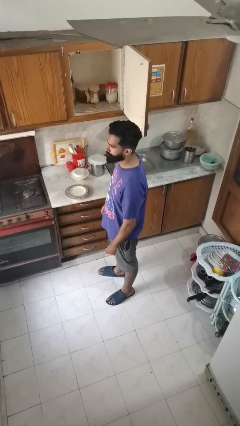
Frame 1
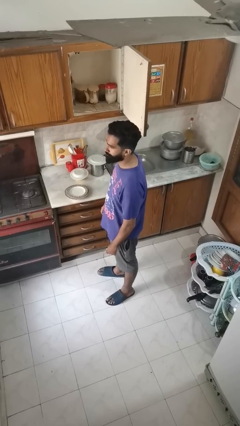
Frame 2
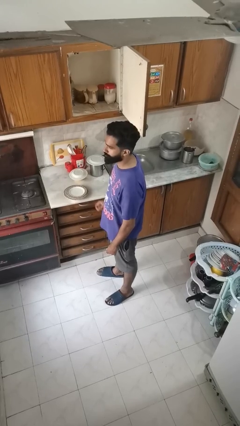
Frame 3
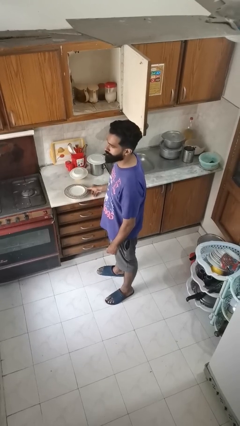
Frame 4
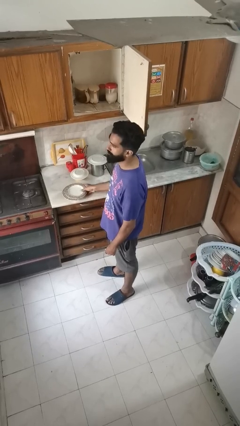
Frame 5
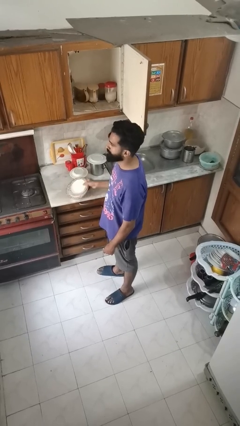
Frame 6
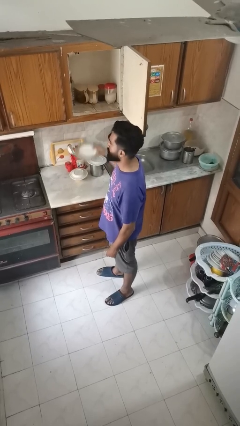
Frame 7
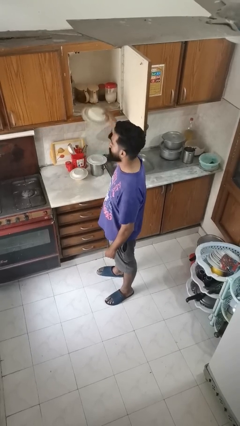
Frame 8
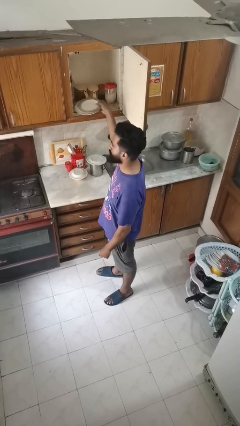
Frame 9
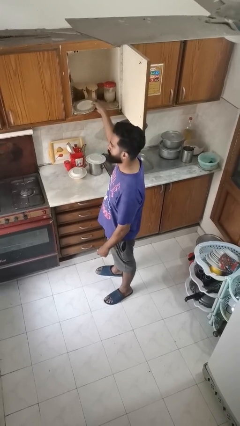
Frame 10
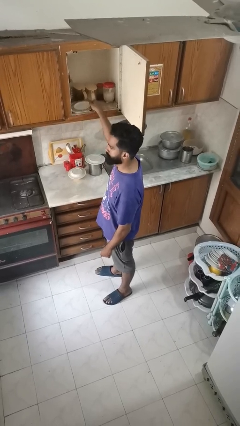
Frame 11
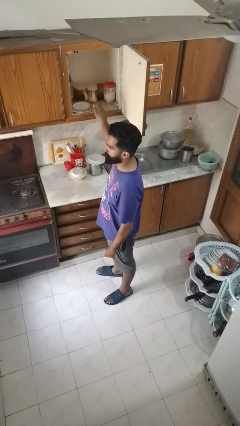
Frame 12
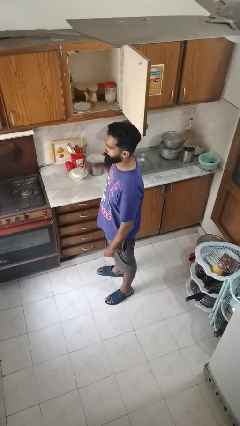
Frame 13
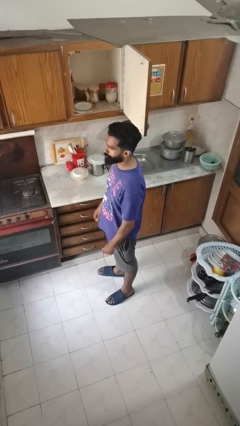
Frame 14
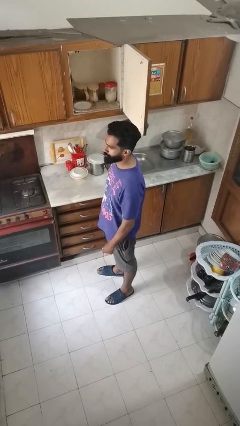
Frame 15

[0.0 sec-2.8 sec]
person puts object in cabinet

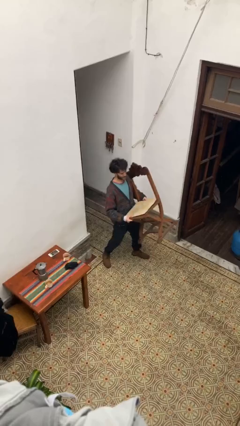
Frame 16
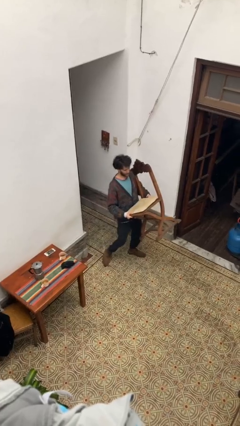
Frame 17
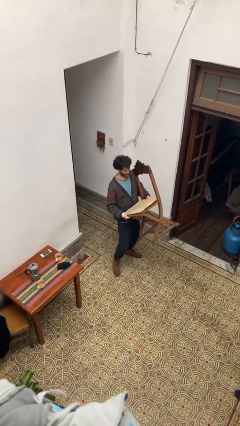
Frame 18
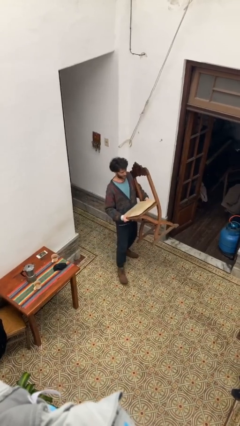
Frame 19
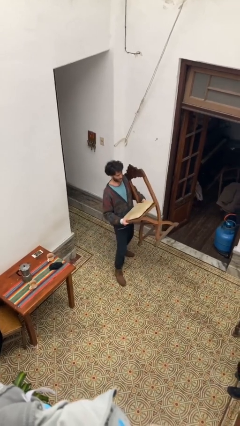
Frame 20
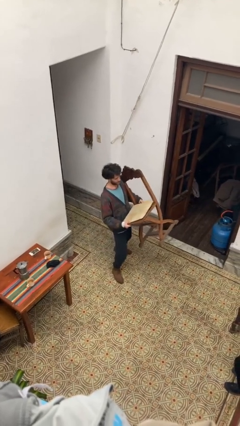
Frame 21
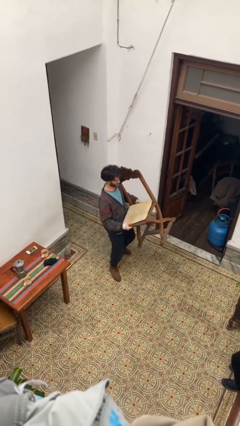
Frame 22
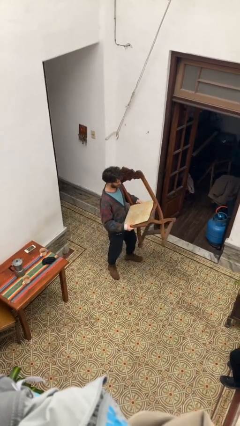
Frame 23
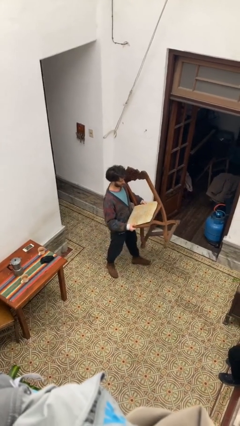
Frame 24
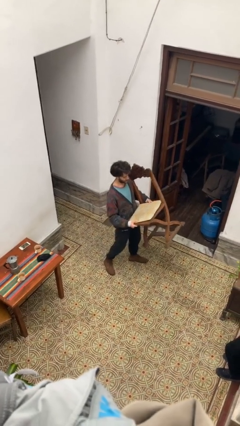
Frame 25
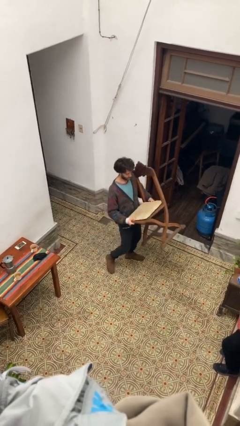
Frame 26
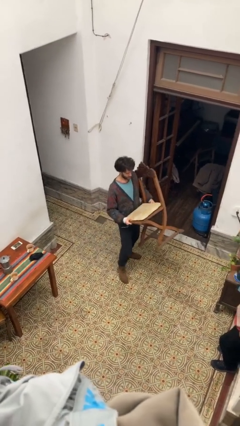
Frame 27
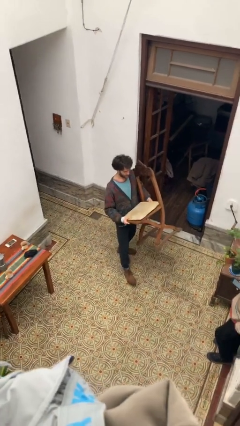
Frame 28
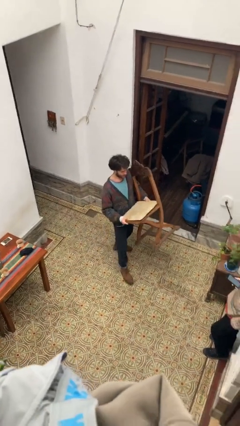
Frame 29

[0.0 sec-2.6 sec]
person carries heavy object

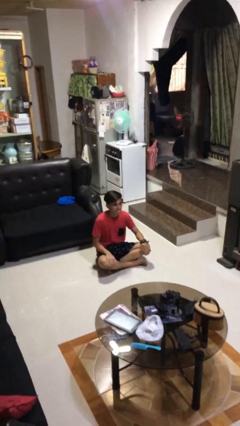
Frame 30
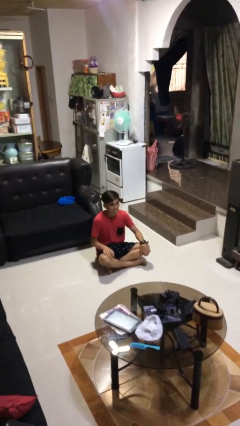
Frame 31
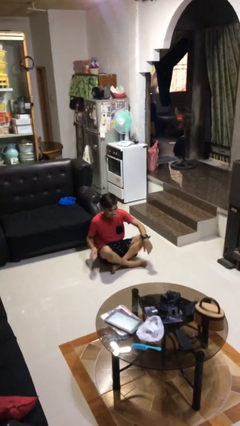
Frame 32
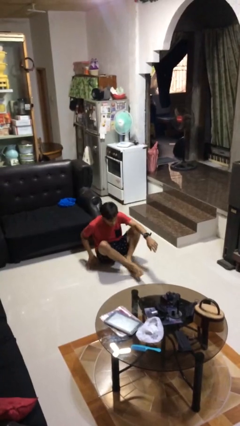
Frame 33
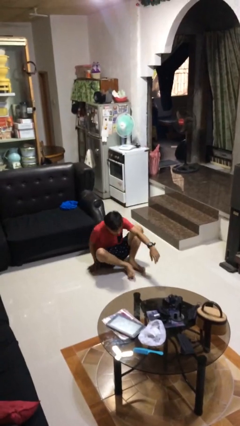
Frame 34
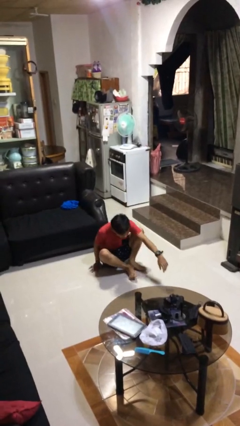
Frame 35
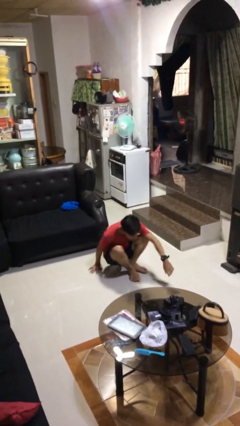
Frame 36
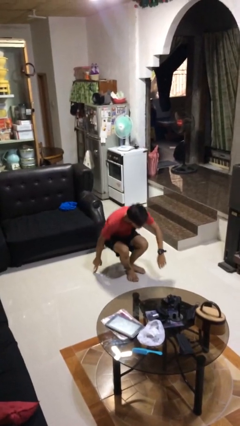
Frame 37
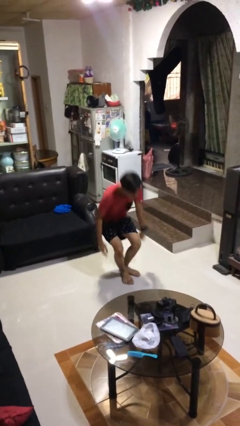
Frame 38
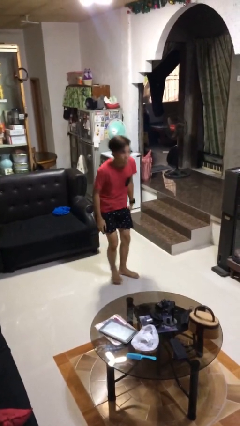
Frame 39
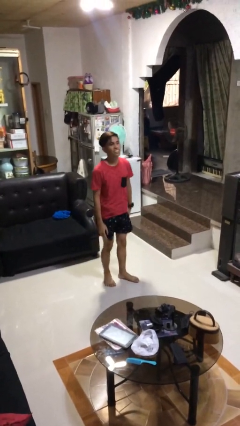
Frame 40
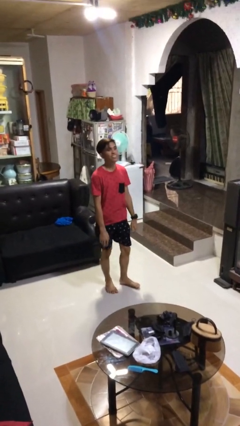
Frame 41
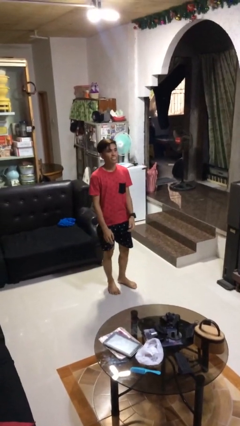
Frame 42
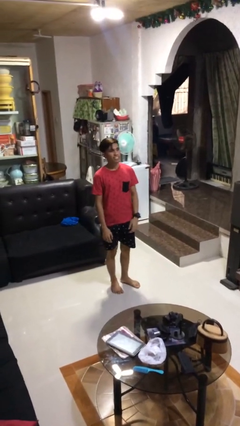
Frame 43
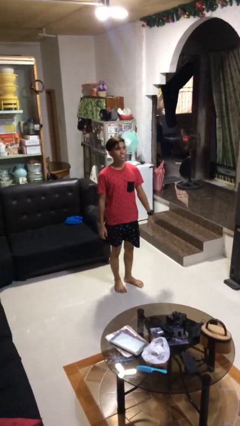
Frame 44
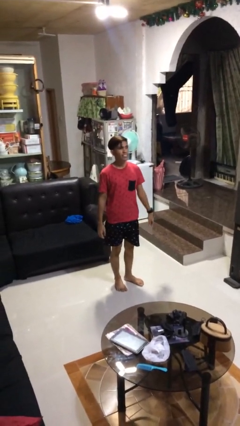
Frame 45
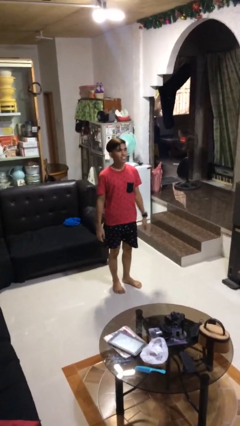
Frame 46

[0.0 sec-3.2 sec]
person stands up from floor

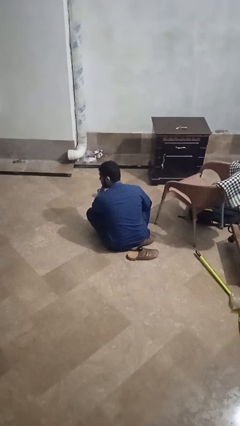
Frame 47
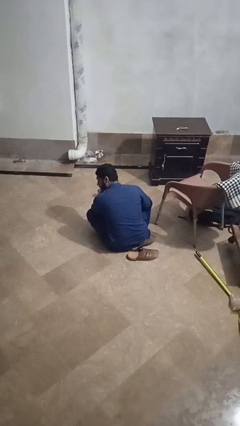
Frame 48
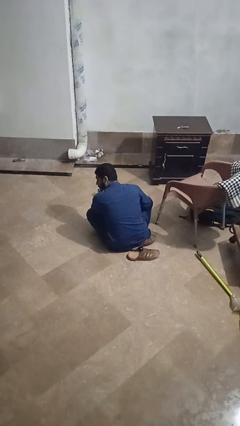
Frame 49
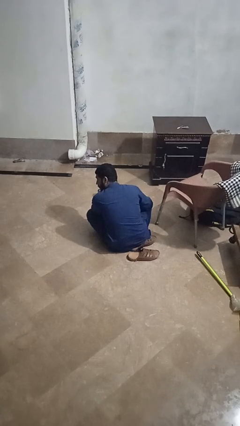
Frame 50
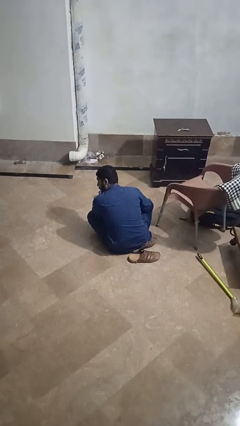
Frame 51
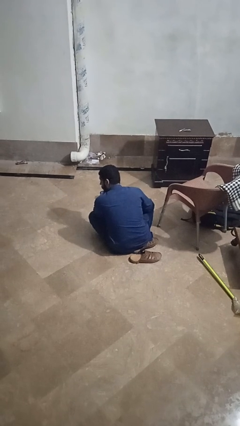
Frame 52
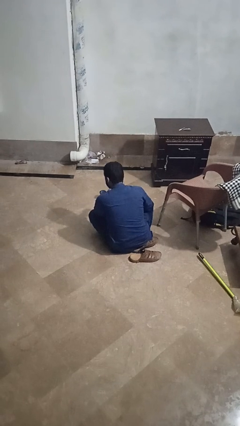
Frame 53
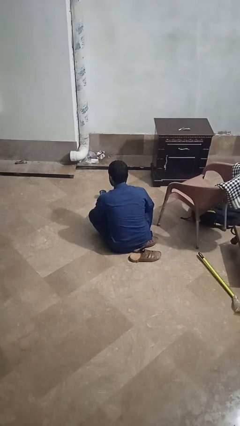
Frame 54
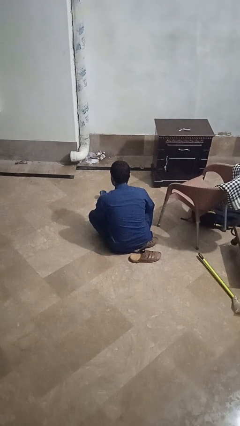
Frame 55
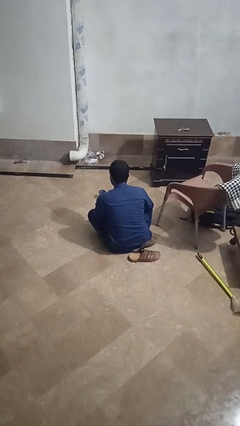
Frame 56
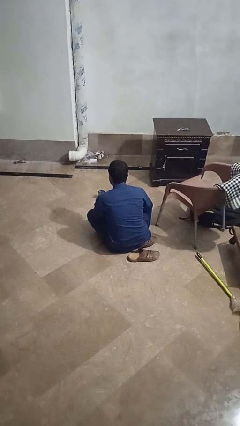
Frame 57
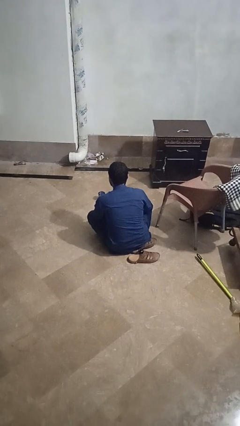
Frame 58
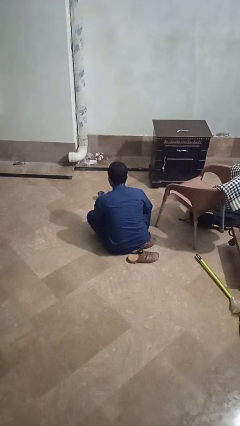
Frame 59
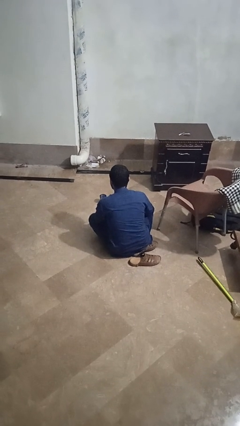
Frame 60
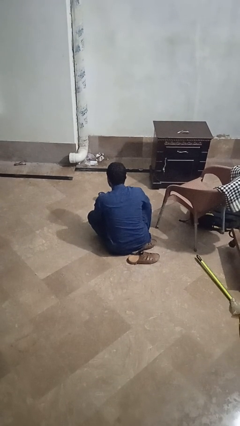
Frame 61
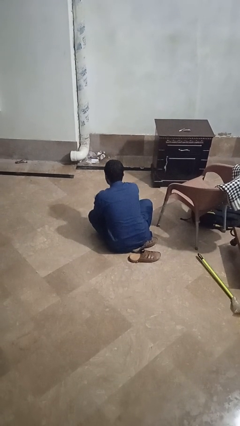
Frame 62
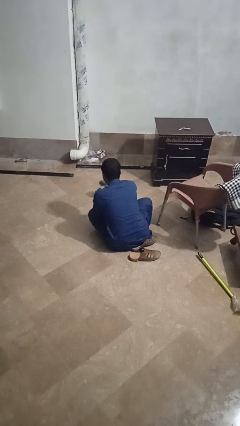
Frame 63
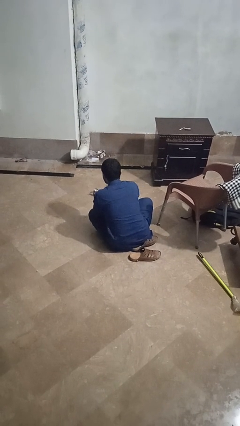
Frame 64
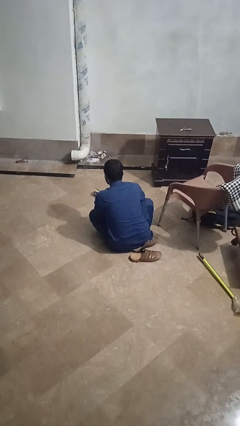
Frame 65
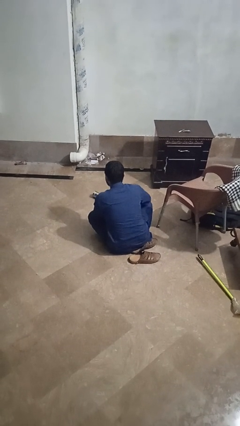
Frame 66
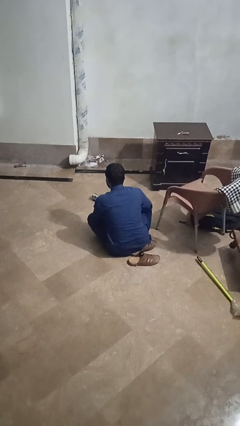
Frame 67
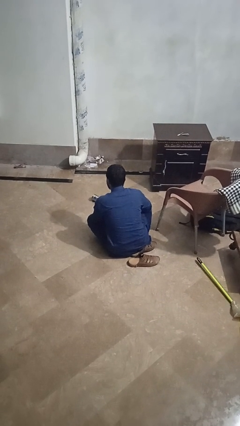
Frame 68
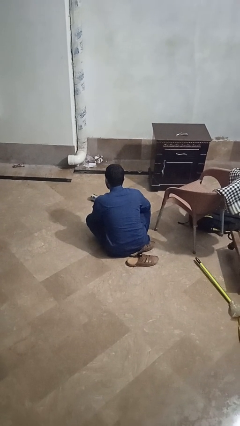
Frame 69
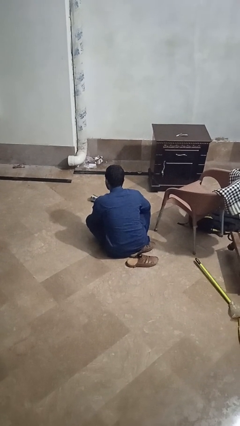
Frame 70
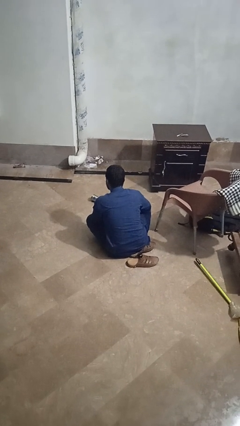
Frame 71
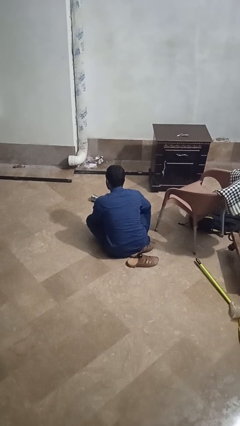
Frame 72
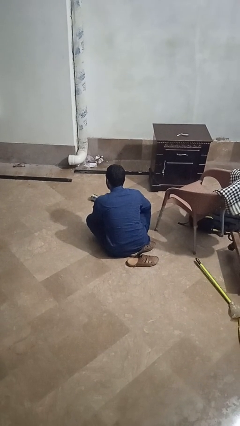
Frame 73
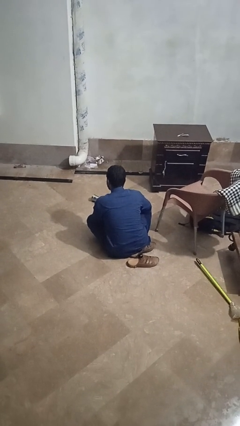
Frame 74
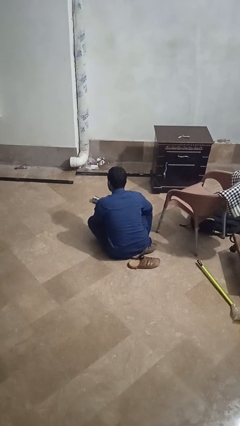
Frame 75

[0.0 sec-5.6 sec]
person spills on floor

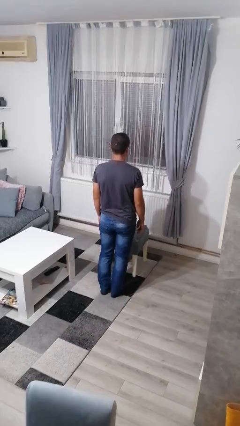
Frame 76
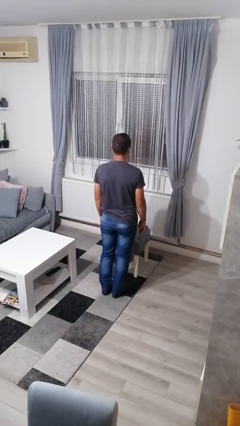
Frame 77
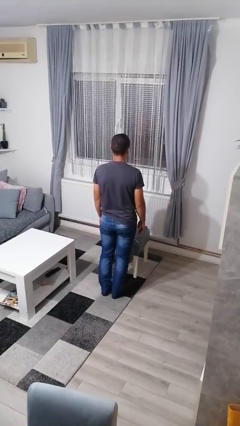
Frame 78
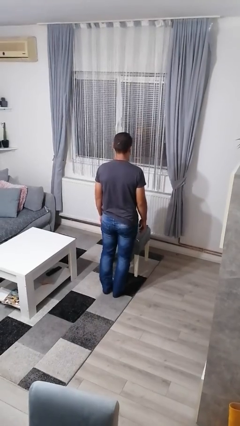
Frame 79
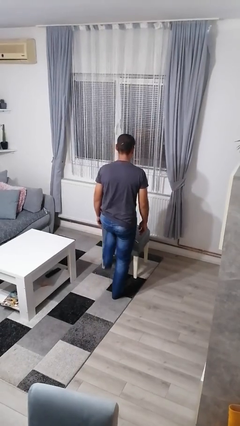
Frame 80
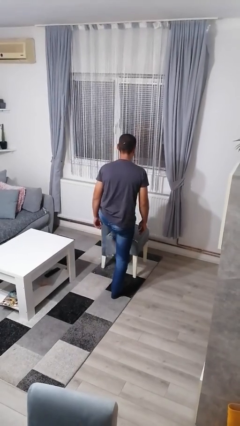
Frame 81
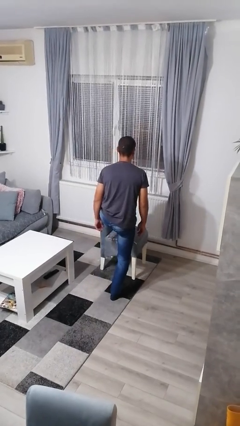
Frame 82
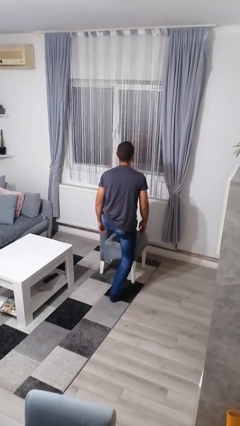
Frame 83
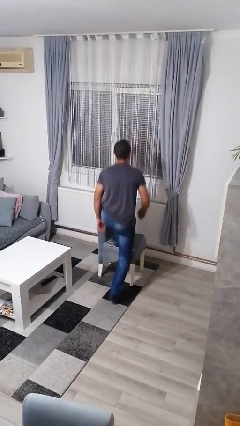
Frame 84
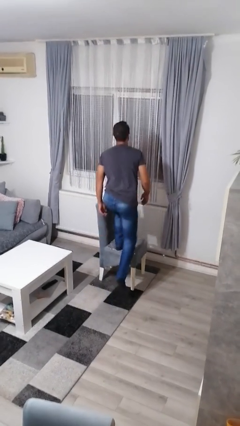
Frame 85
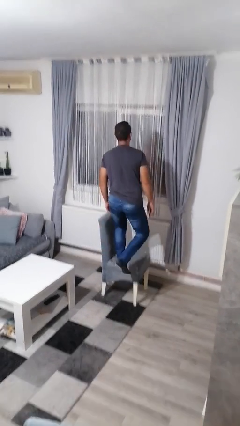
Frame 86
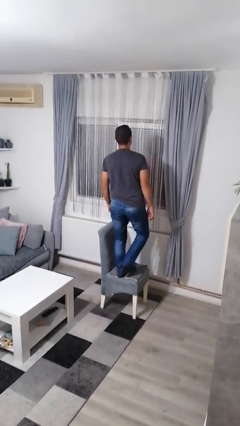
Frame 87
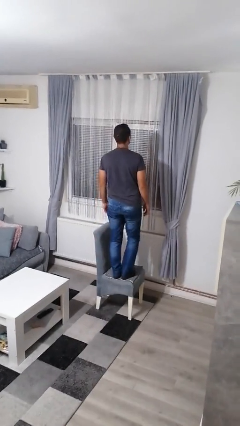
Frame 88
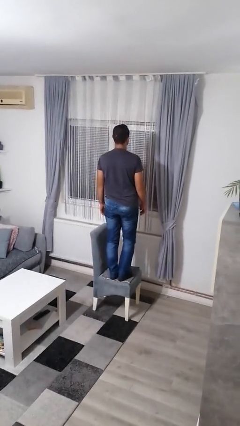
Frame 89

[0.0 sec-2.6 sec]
person climbs on chair

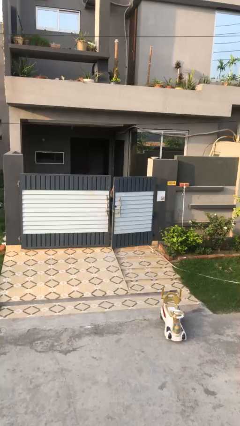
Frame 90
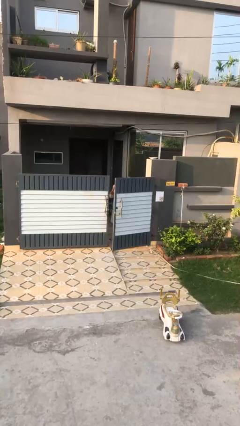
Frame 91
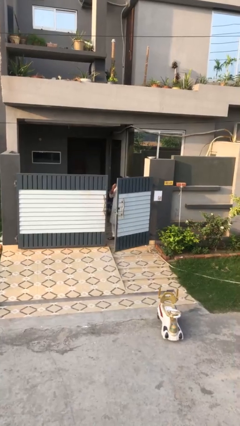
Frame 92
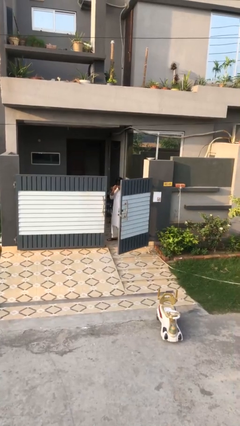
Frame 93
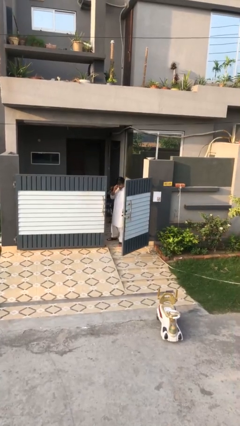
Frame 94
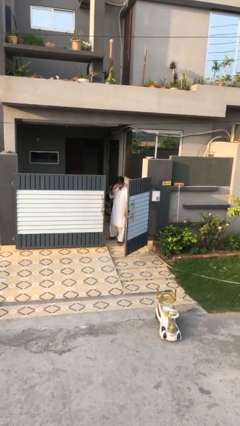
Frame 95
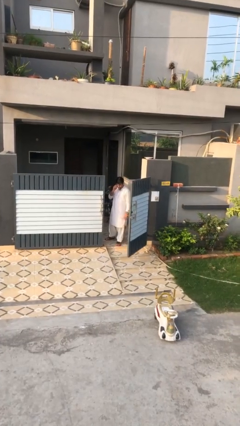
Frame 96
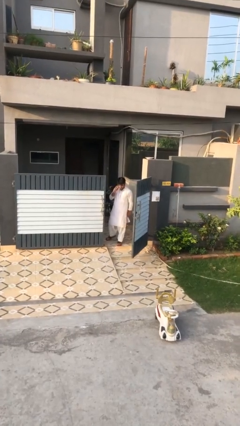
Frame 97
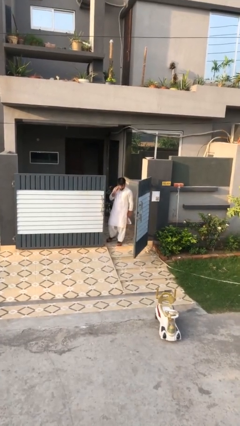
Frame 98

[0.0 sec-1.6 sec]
person opens facility door
